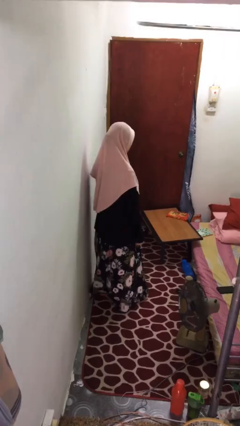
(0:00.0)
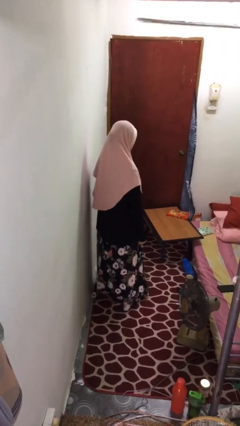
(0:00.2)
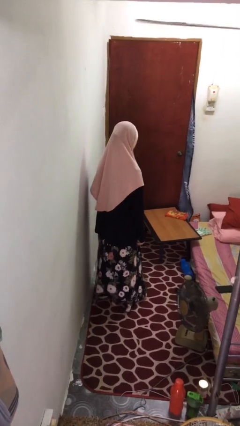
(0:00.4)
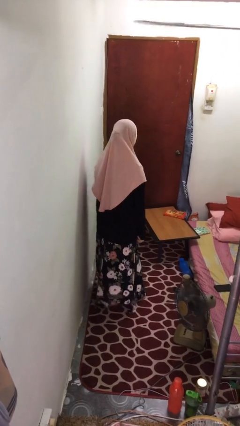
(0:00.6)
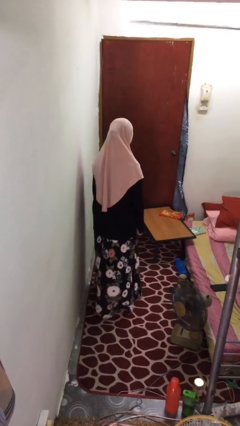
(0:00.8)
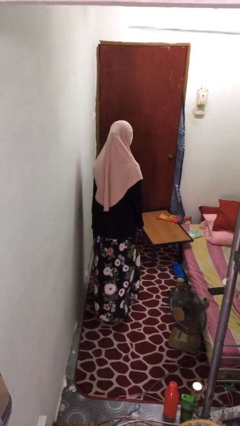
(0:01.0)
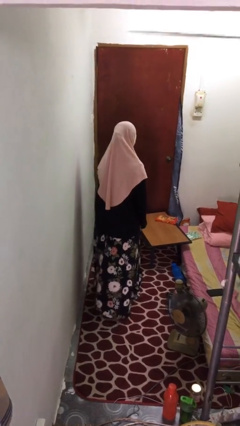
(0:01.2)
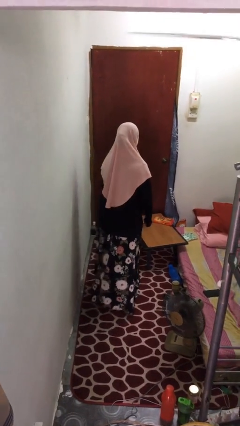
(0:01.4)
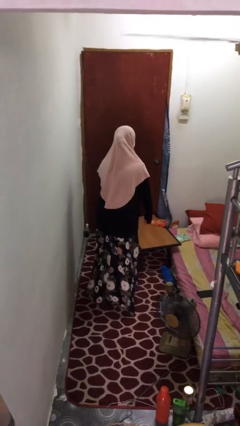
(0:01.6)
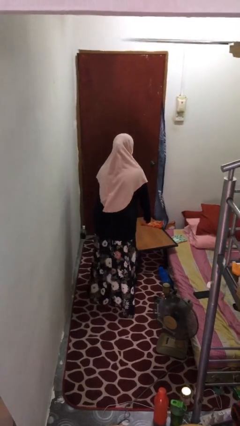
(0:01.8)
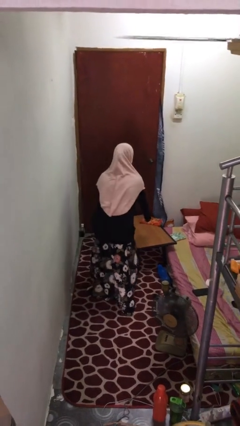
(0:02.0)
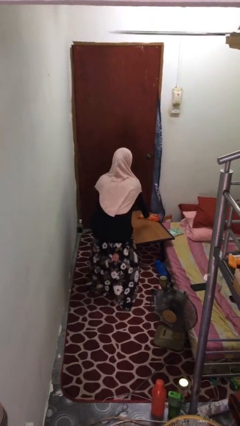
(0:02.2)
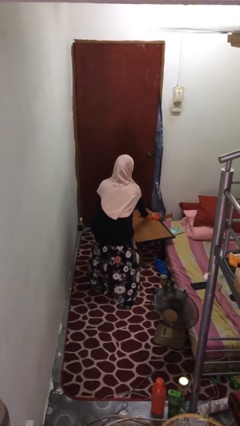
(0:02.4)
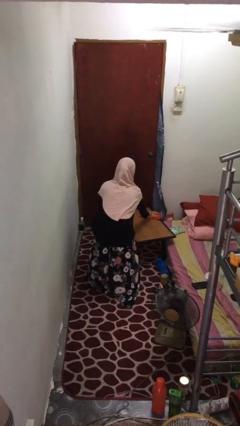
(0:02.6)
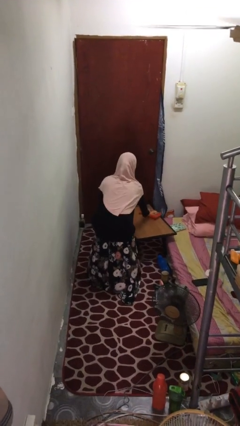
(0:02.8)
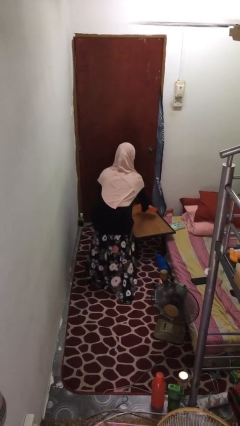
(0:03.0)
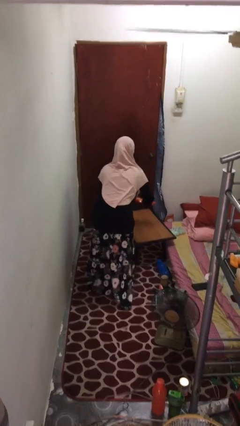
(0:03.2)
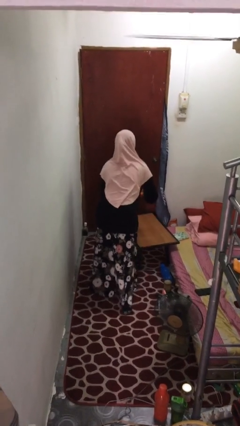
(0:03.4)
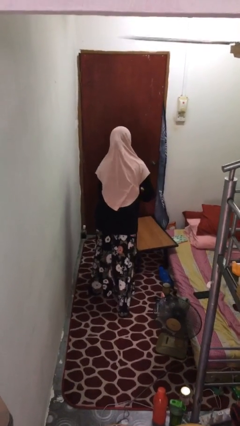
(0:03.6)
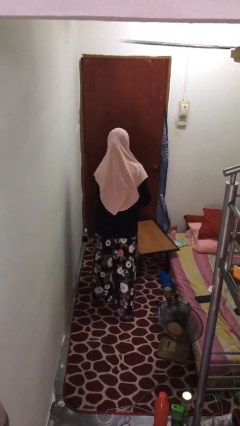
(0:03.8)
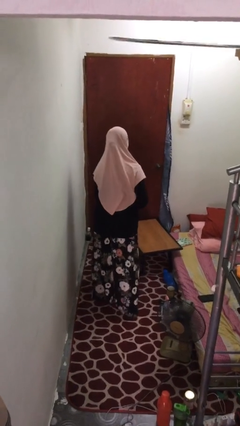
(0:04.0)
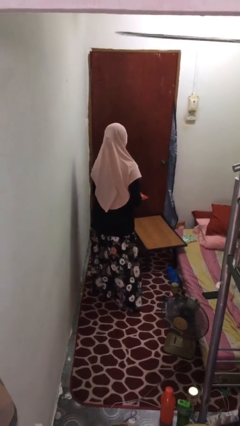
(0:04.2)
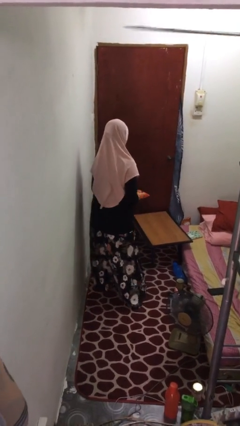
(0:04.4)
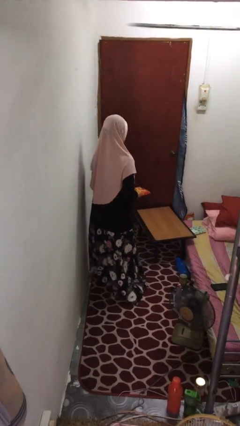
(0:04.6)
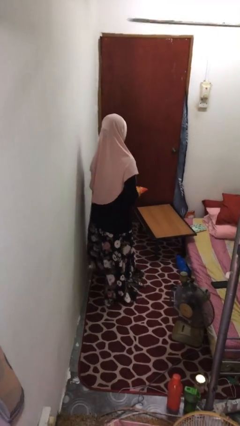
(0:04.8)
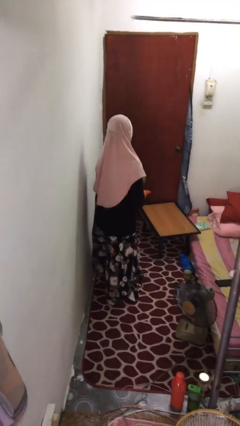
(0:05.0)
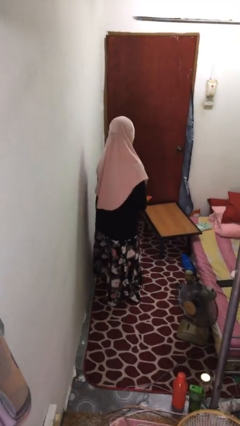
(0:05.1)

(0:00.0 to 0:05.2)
person picks up object from table

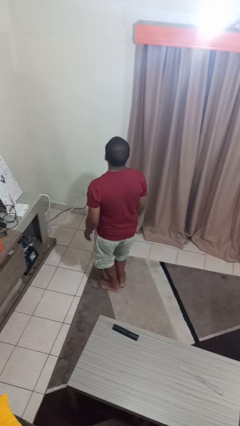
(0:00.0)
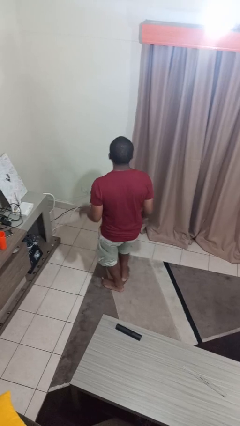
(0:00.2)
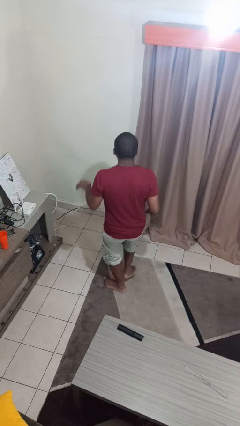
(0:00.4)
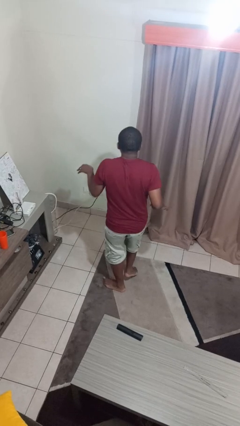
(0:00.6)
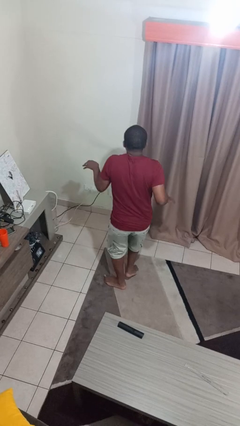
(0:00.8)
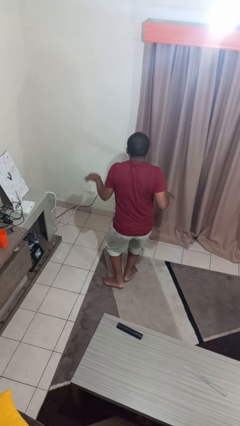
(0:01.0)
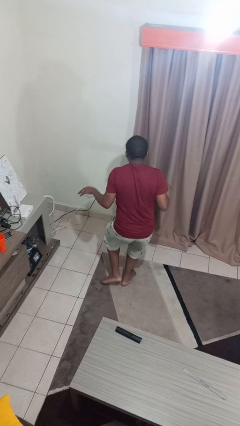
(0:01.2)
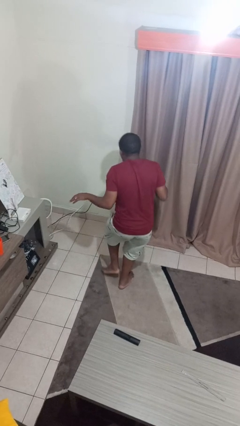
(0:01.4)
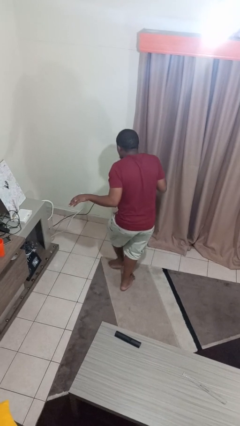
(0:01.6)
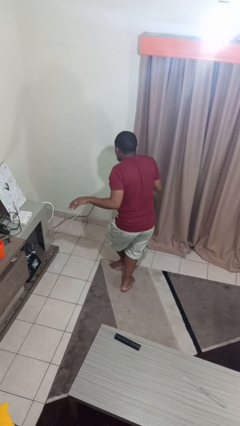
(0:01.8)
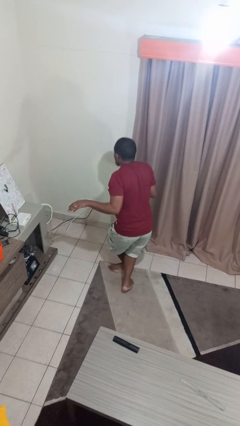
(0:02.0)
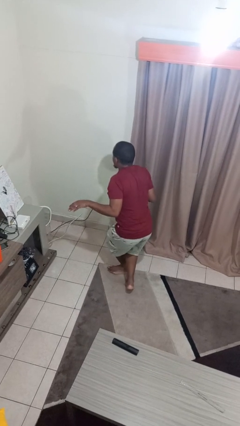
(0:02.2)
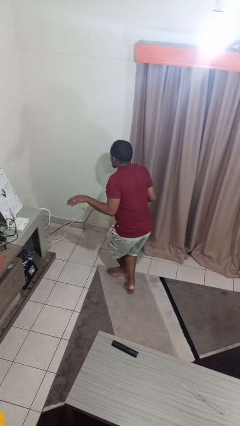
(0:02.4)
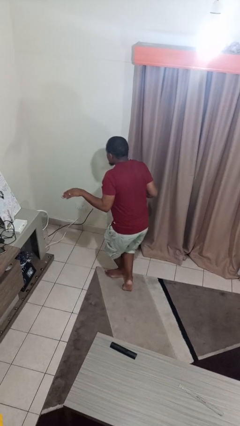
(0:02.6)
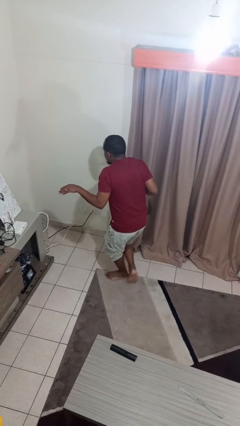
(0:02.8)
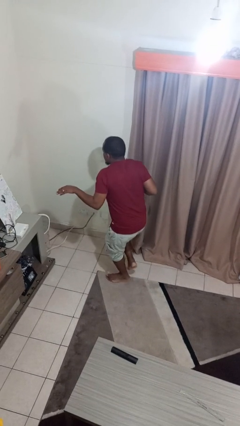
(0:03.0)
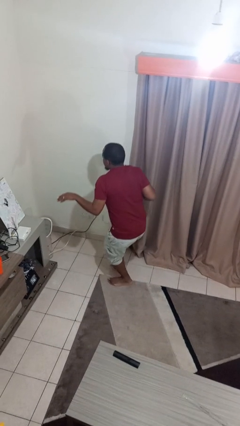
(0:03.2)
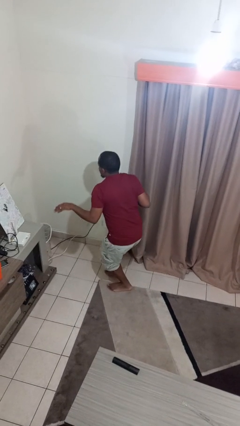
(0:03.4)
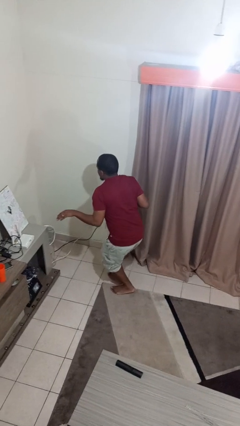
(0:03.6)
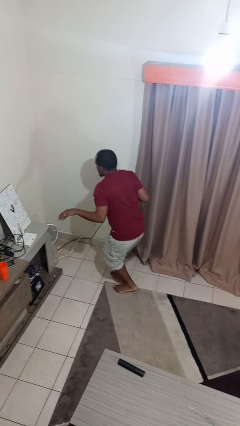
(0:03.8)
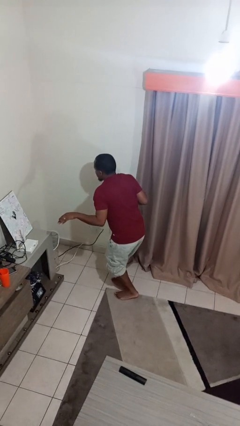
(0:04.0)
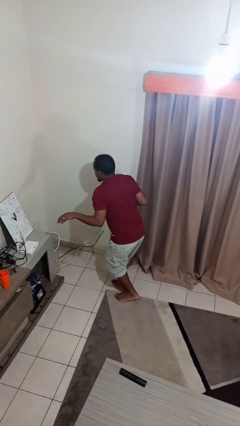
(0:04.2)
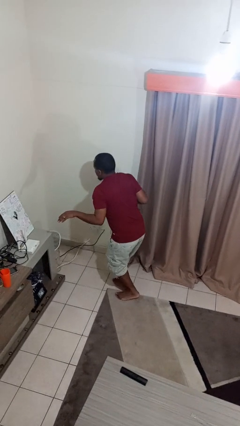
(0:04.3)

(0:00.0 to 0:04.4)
person walks tiptoe

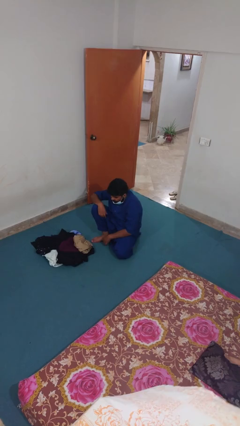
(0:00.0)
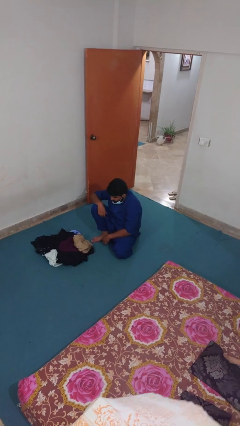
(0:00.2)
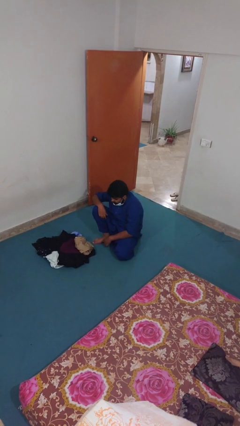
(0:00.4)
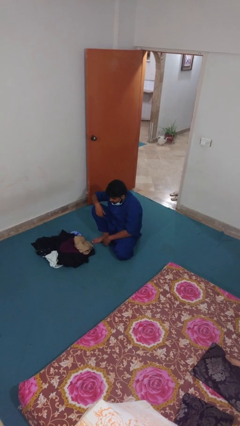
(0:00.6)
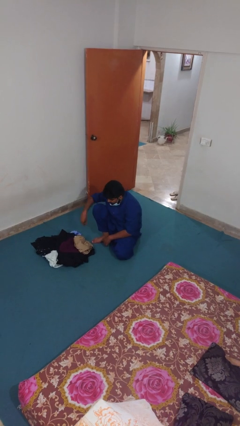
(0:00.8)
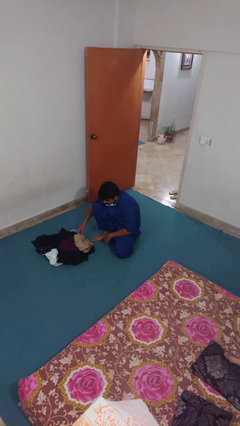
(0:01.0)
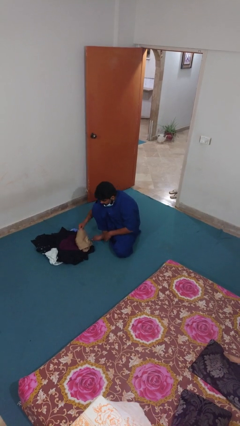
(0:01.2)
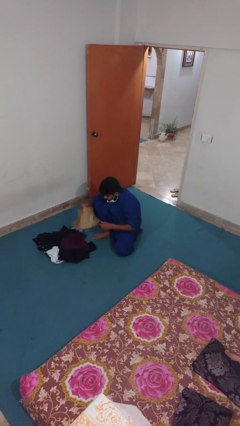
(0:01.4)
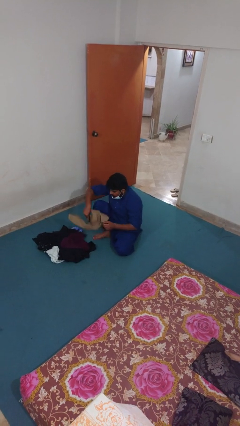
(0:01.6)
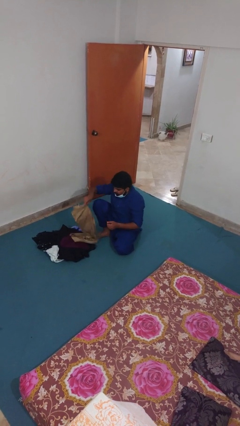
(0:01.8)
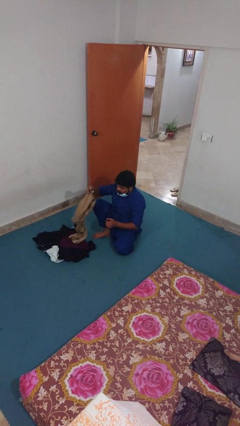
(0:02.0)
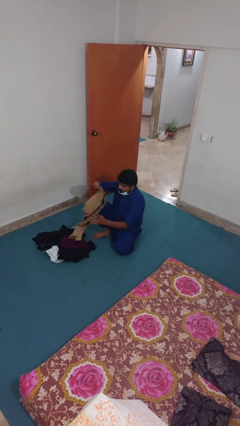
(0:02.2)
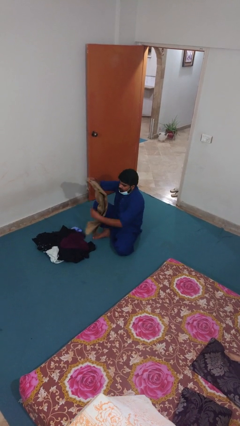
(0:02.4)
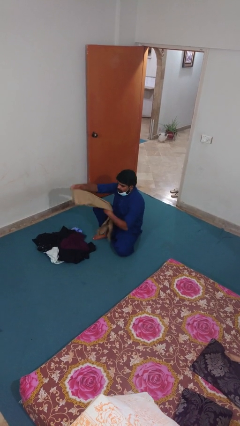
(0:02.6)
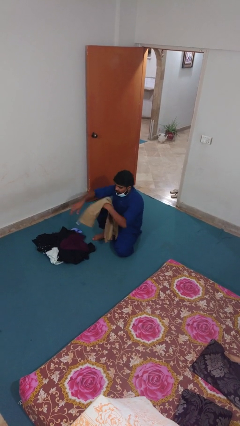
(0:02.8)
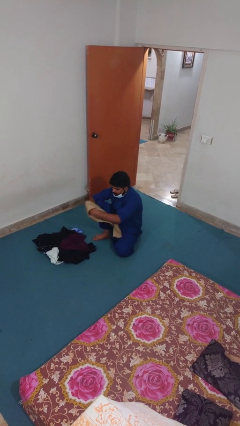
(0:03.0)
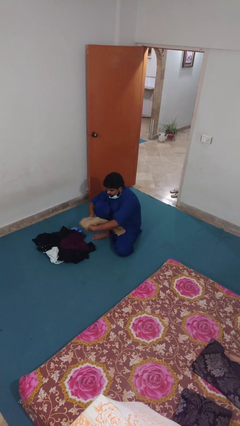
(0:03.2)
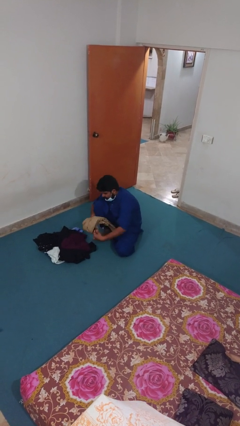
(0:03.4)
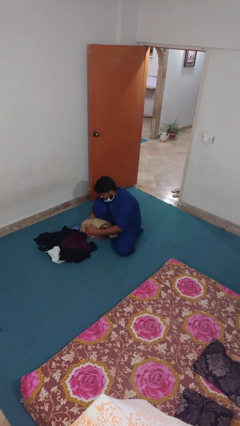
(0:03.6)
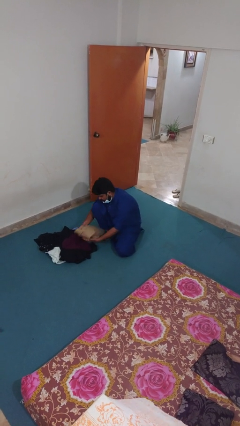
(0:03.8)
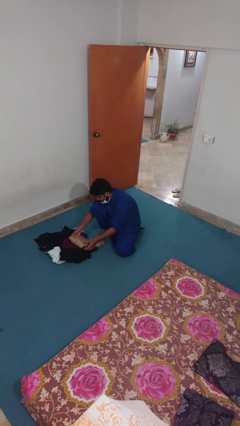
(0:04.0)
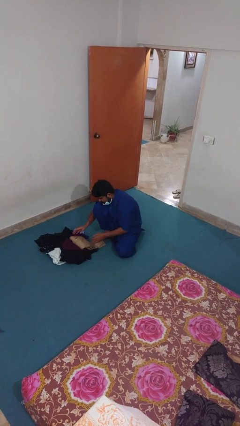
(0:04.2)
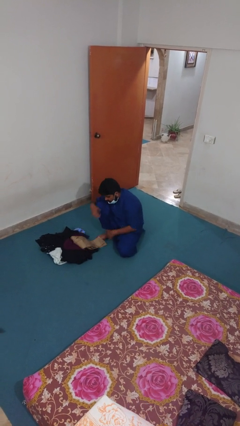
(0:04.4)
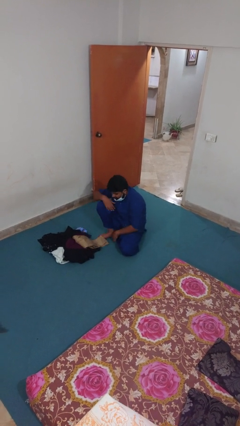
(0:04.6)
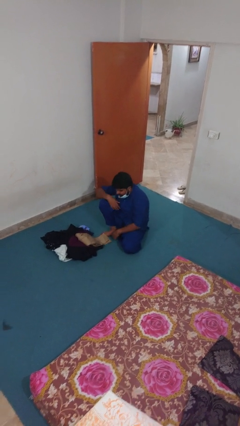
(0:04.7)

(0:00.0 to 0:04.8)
person folds pants

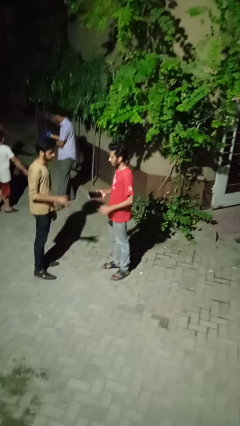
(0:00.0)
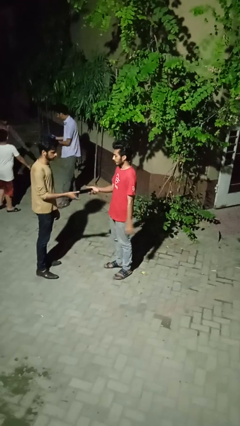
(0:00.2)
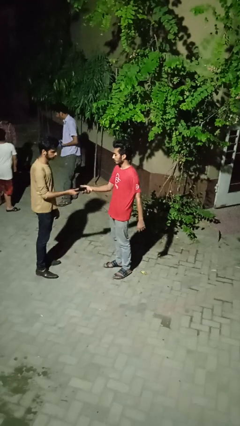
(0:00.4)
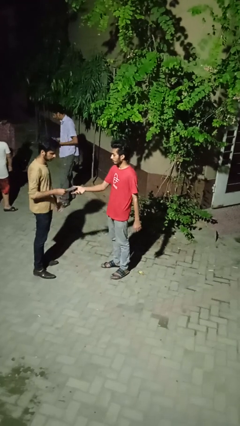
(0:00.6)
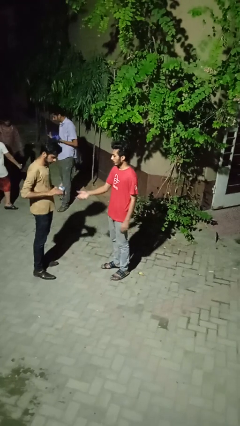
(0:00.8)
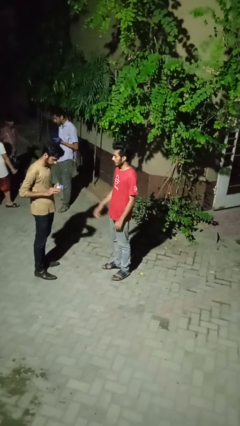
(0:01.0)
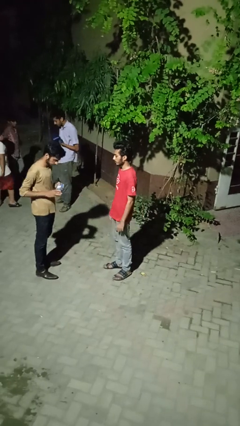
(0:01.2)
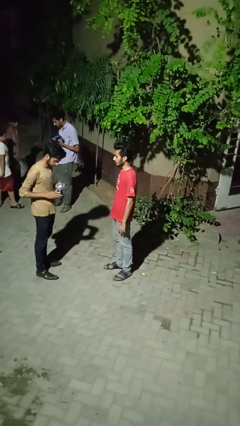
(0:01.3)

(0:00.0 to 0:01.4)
person transfers object to person

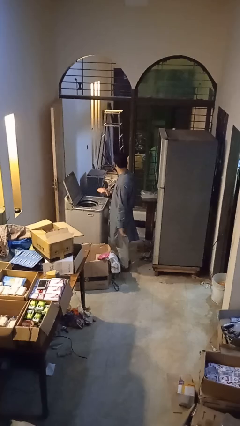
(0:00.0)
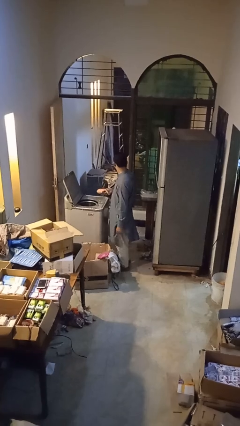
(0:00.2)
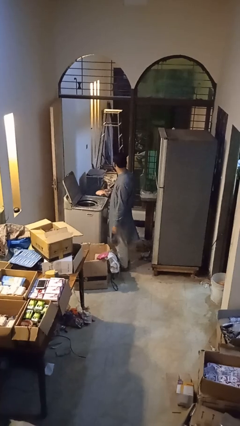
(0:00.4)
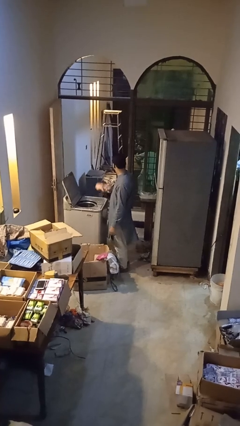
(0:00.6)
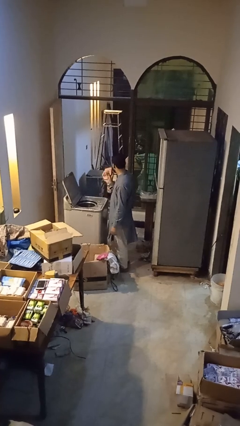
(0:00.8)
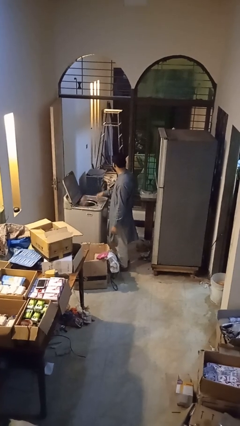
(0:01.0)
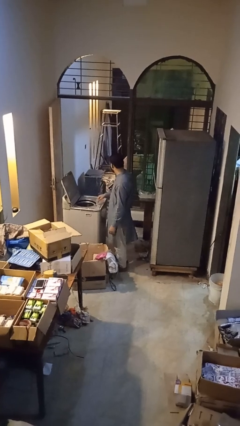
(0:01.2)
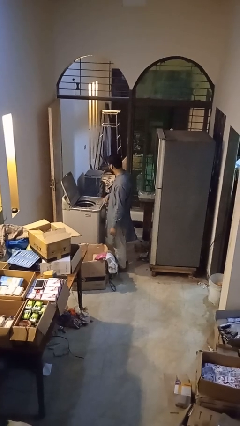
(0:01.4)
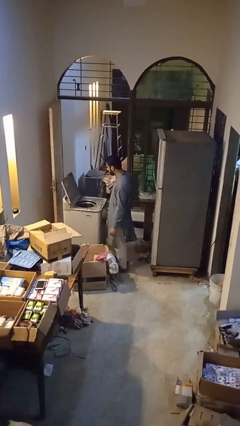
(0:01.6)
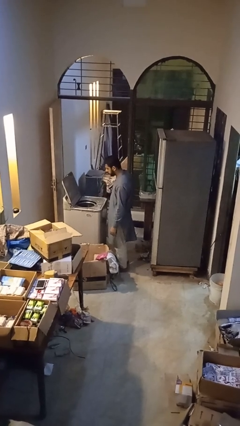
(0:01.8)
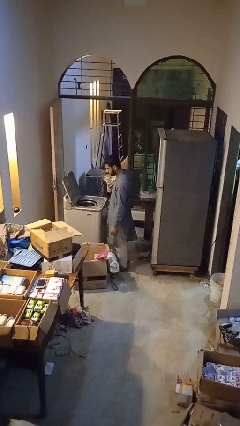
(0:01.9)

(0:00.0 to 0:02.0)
person loads clotheswasher
